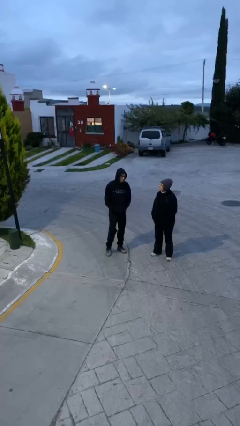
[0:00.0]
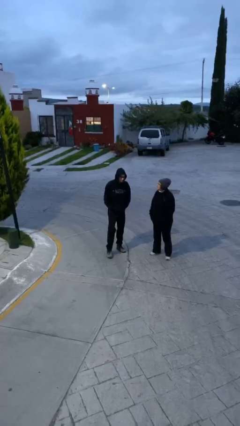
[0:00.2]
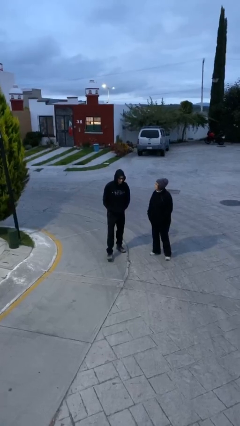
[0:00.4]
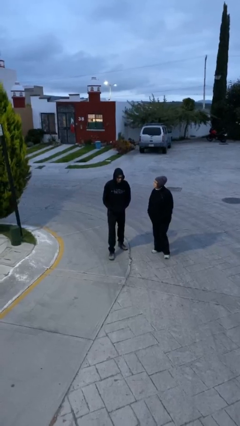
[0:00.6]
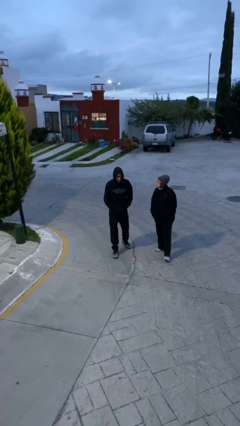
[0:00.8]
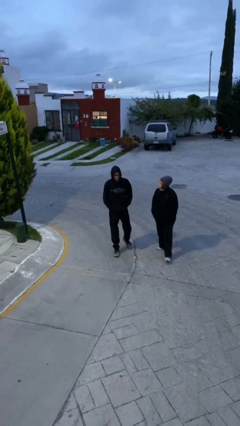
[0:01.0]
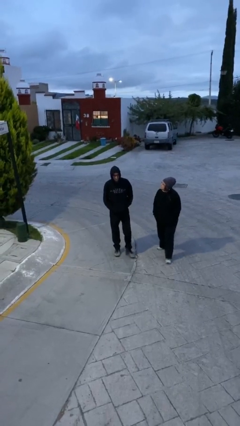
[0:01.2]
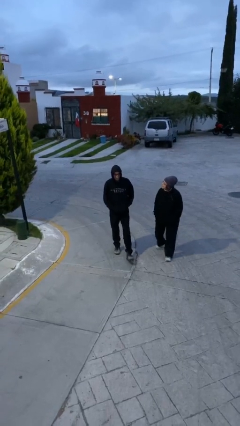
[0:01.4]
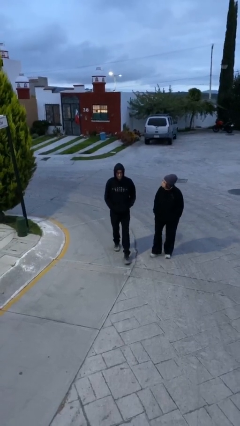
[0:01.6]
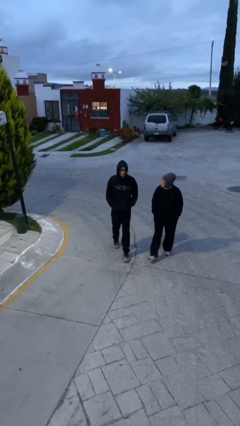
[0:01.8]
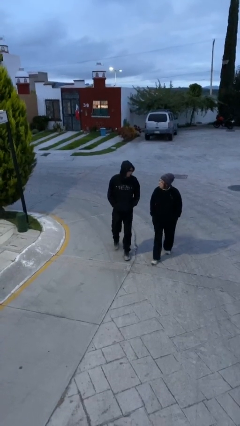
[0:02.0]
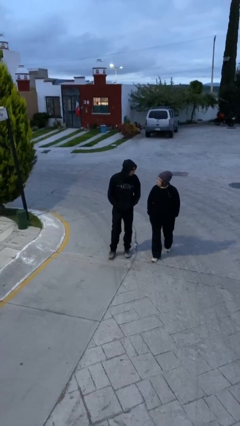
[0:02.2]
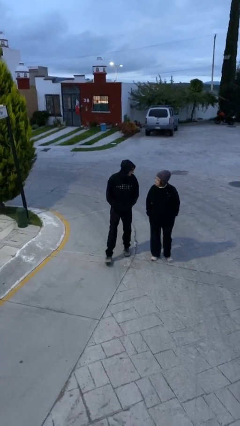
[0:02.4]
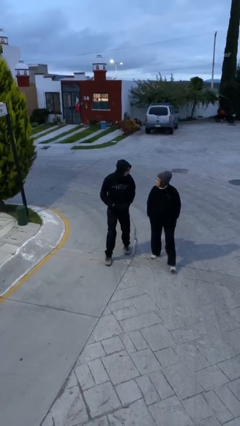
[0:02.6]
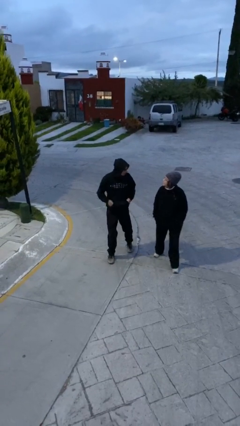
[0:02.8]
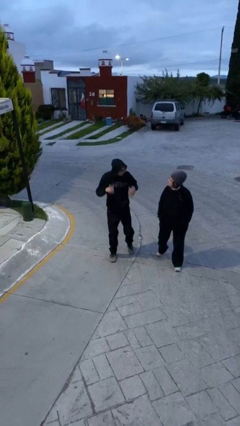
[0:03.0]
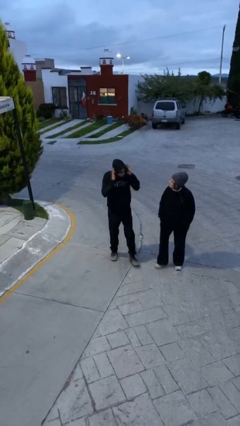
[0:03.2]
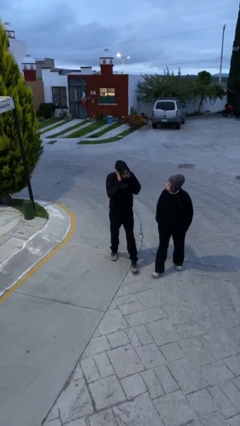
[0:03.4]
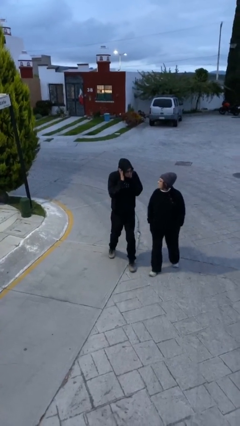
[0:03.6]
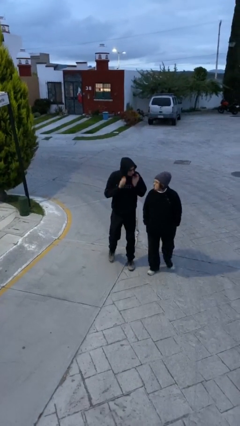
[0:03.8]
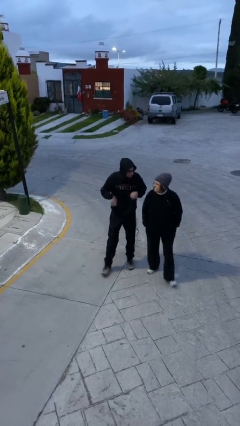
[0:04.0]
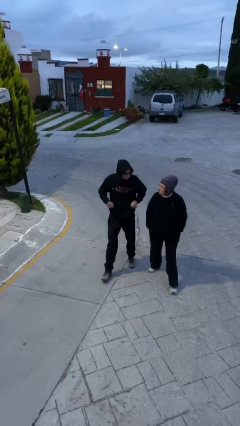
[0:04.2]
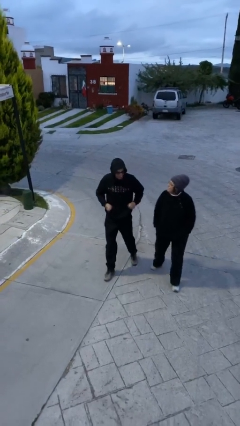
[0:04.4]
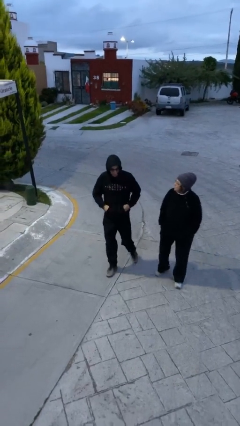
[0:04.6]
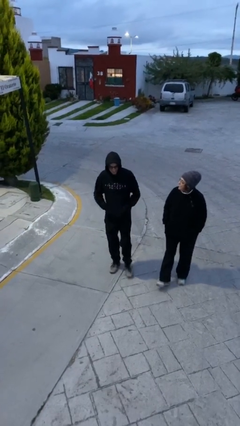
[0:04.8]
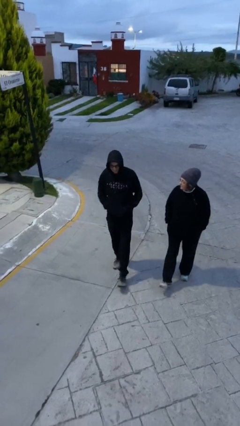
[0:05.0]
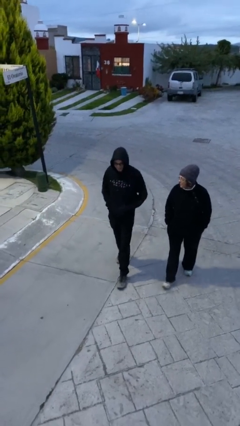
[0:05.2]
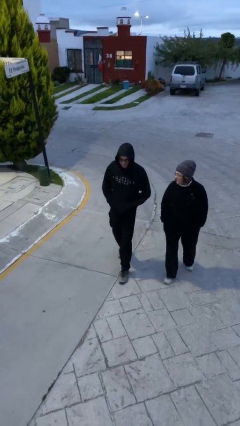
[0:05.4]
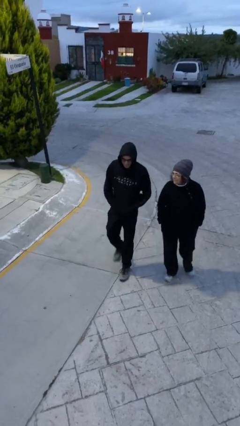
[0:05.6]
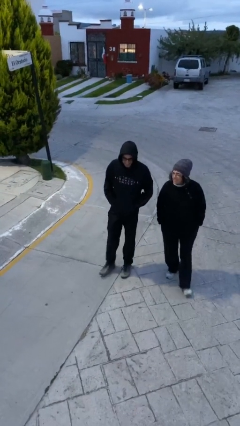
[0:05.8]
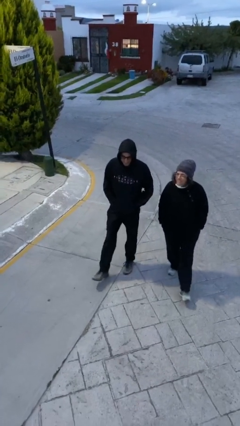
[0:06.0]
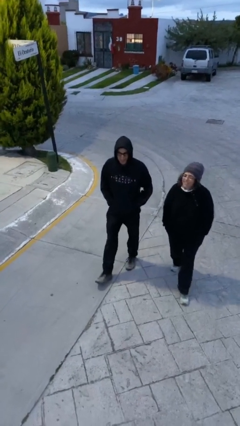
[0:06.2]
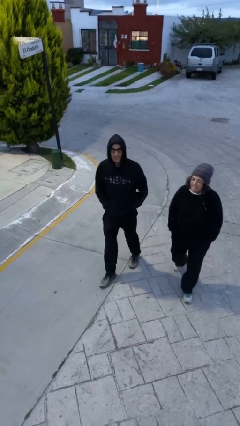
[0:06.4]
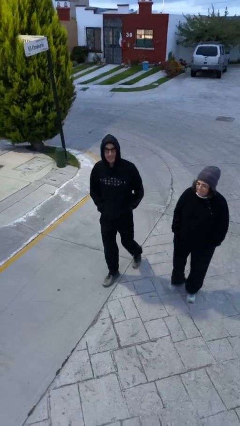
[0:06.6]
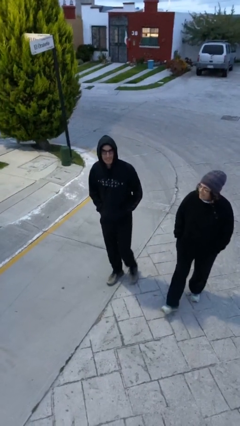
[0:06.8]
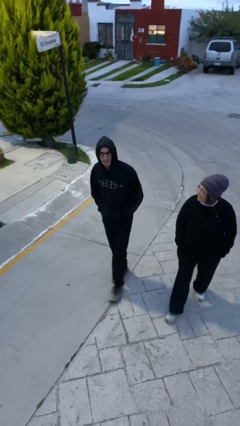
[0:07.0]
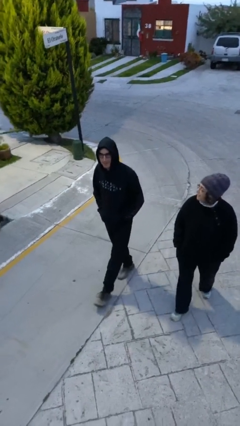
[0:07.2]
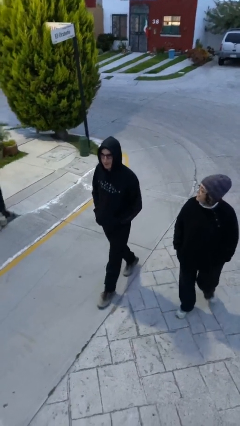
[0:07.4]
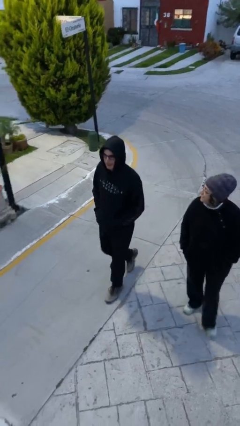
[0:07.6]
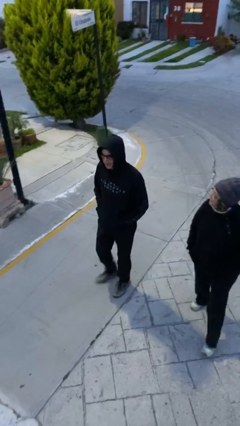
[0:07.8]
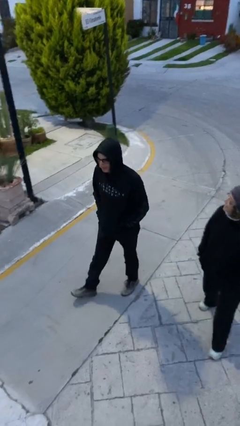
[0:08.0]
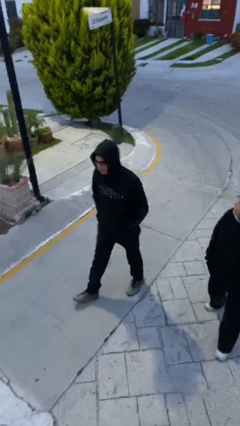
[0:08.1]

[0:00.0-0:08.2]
person talks to person

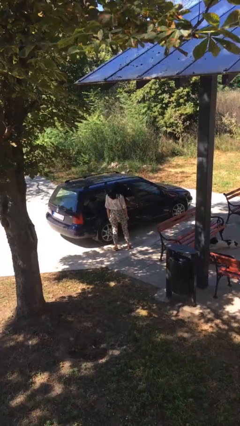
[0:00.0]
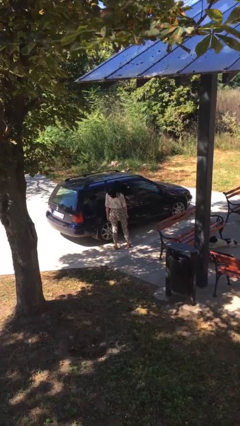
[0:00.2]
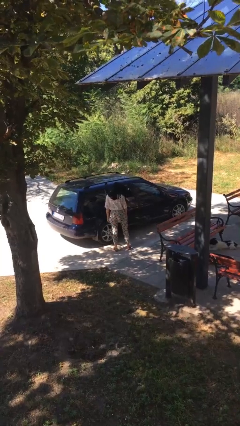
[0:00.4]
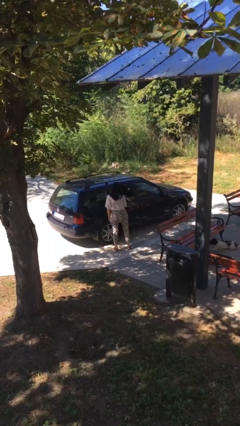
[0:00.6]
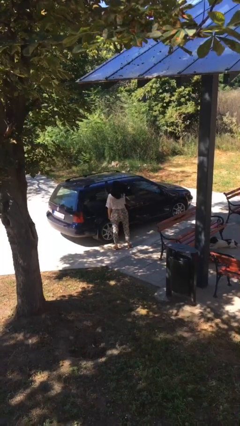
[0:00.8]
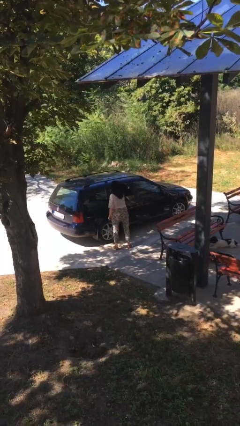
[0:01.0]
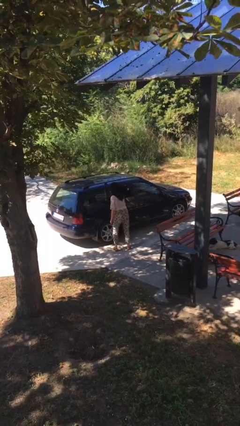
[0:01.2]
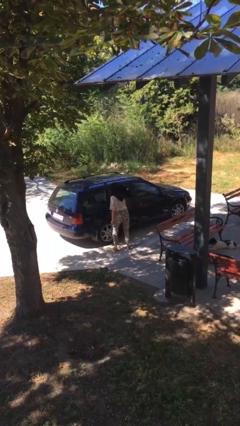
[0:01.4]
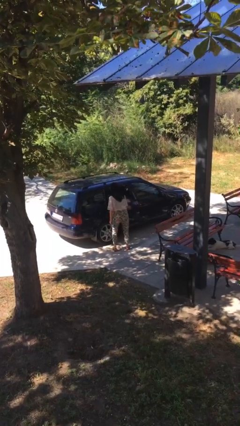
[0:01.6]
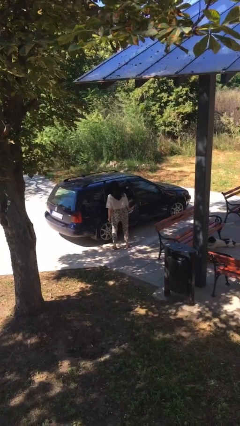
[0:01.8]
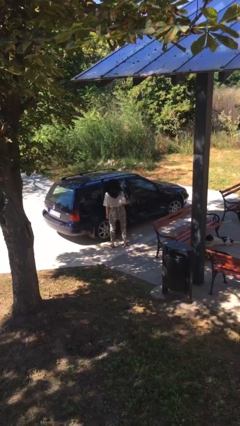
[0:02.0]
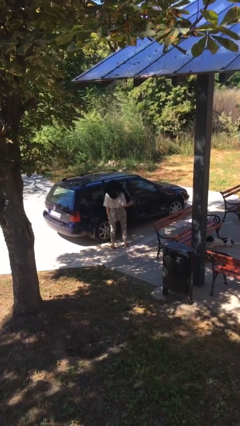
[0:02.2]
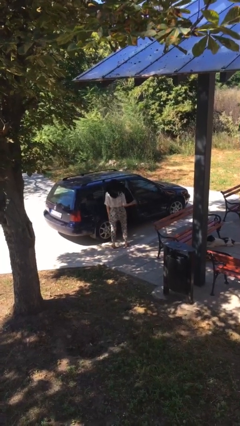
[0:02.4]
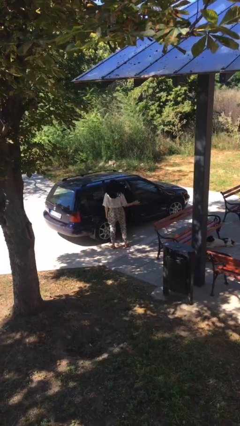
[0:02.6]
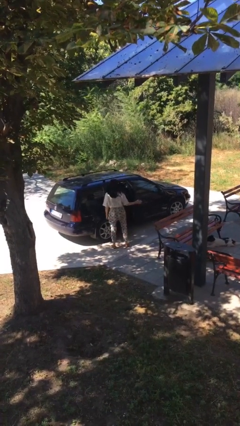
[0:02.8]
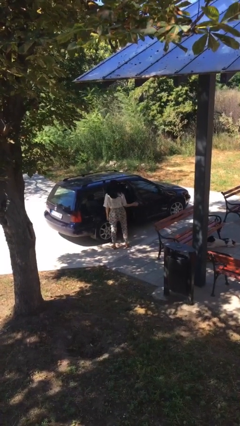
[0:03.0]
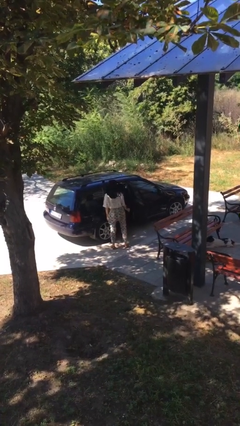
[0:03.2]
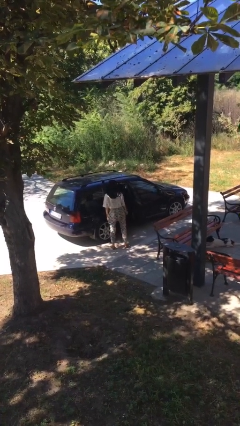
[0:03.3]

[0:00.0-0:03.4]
person opens car door

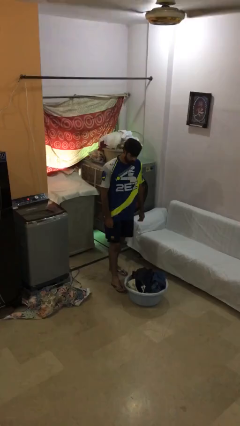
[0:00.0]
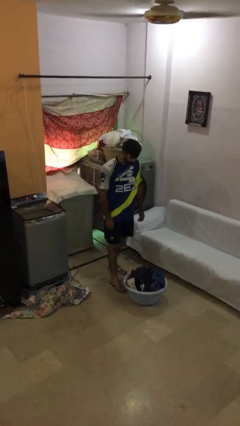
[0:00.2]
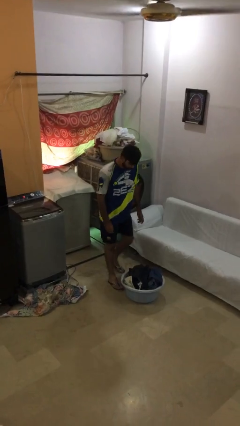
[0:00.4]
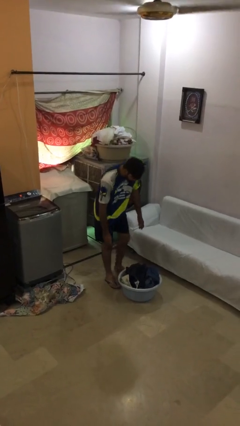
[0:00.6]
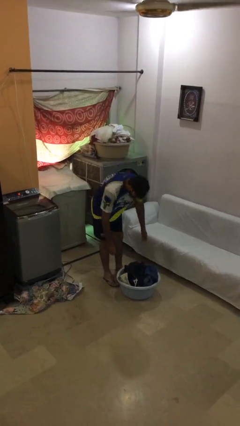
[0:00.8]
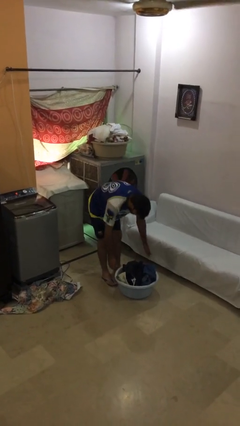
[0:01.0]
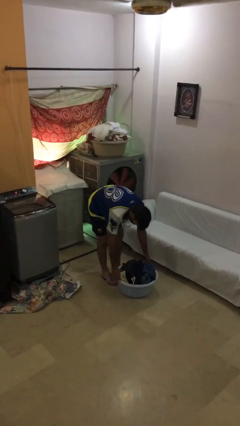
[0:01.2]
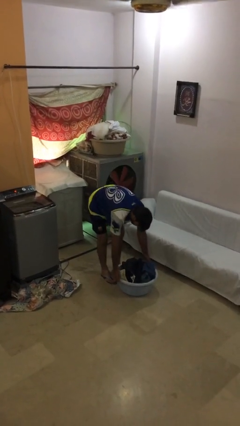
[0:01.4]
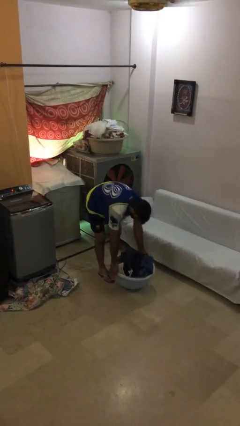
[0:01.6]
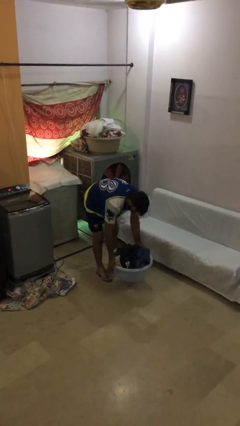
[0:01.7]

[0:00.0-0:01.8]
person picks up object from floor

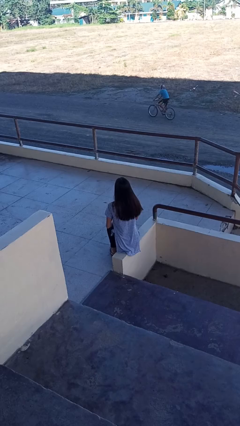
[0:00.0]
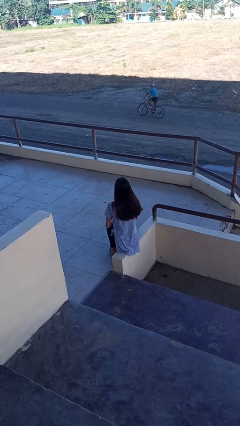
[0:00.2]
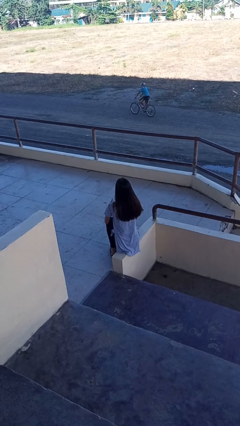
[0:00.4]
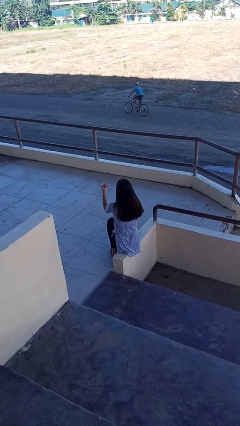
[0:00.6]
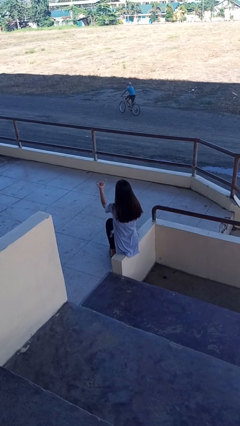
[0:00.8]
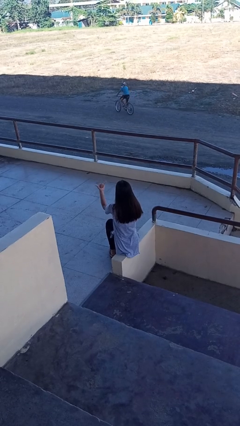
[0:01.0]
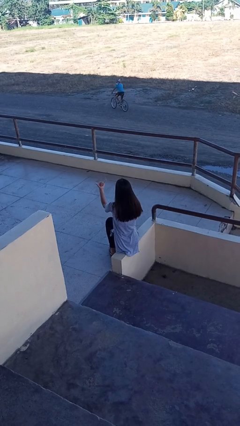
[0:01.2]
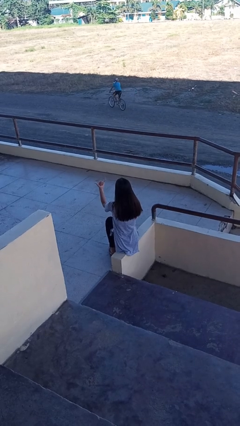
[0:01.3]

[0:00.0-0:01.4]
person gestures hang loose

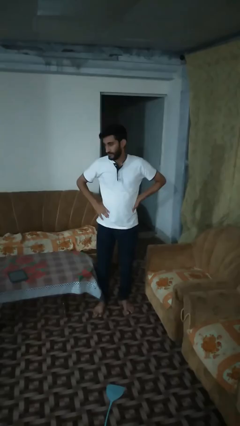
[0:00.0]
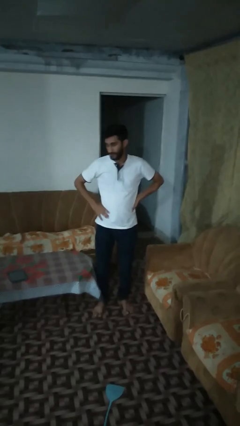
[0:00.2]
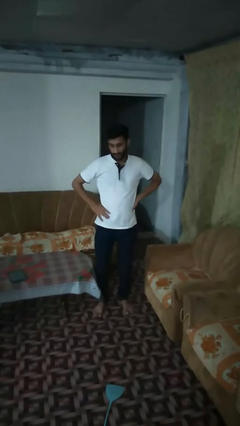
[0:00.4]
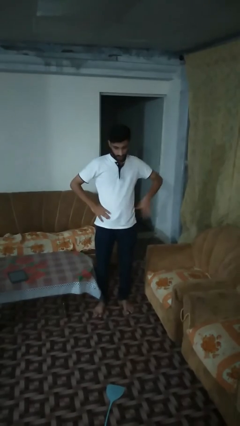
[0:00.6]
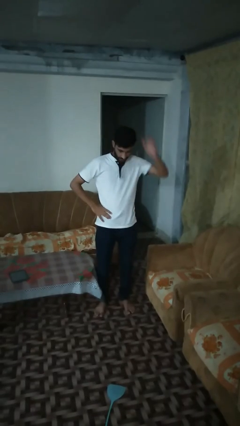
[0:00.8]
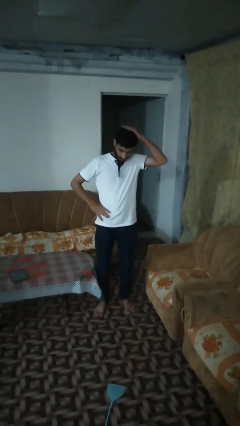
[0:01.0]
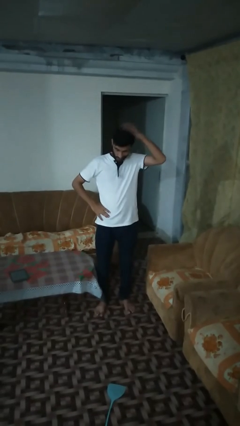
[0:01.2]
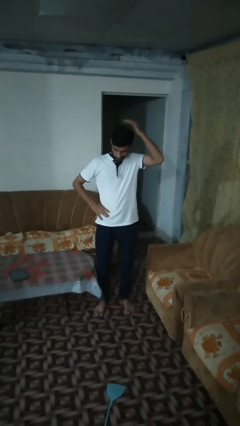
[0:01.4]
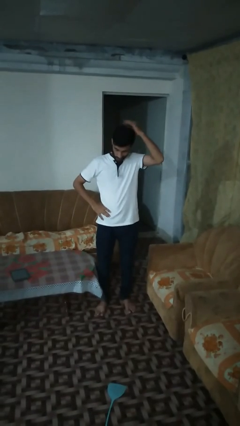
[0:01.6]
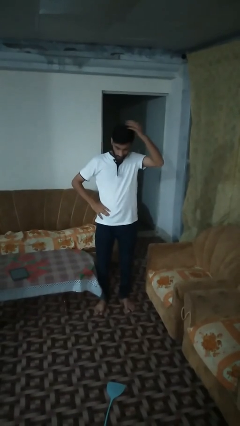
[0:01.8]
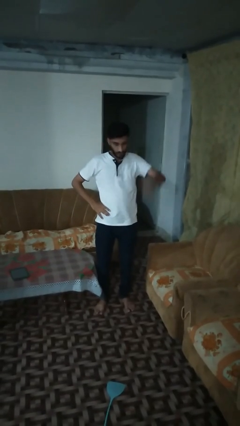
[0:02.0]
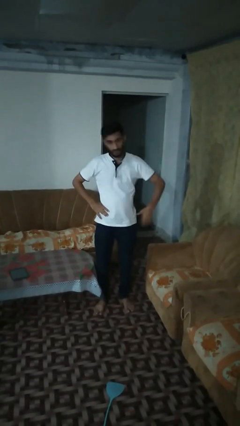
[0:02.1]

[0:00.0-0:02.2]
person pats head

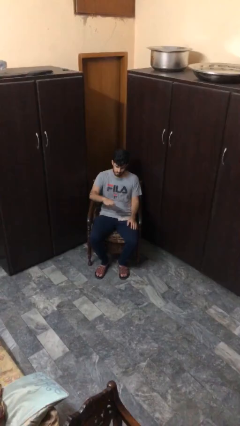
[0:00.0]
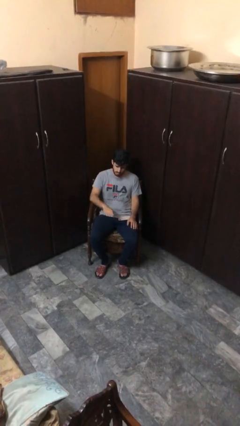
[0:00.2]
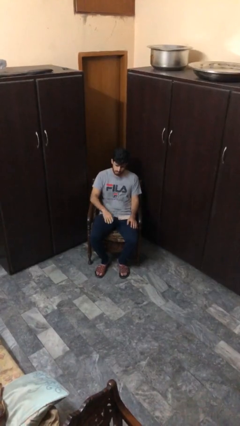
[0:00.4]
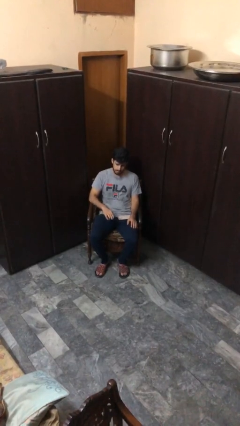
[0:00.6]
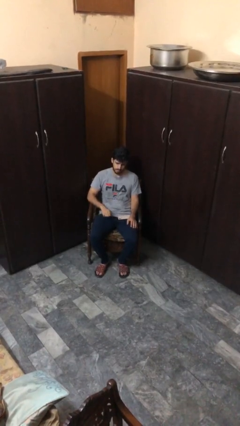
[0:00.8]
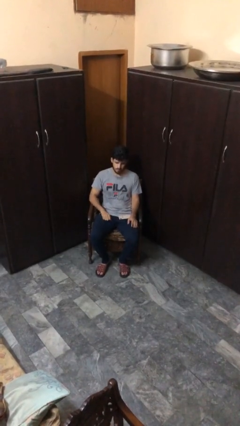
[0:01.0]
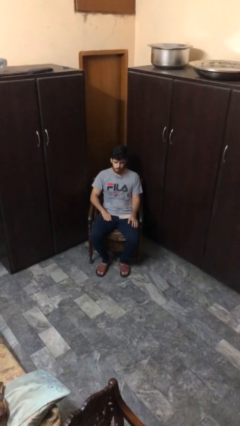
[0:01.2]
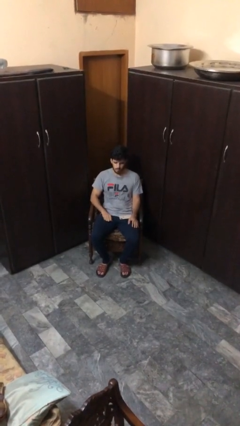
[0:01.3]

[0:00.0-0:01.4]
person gestures swipe down
